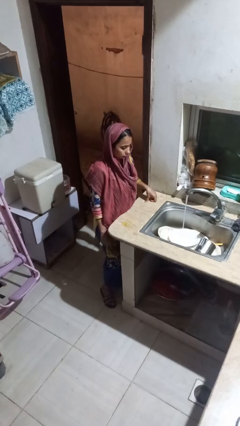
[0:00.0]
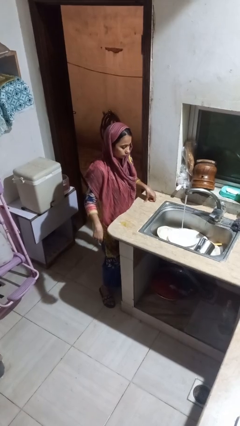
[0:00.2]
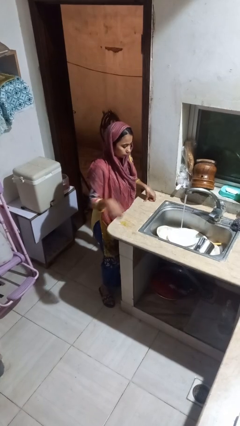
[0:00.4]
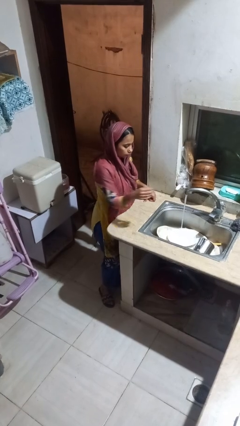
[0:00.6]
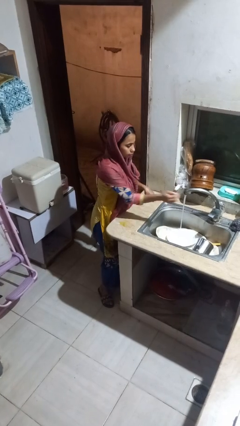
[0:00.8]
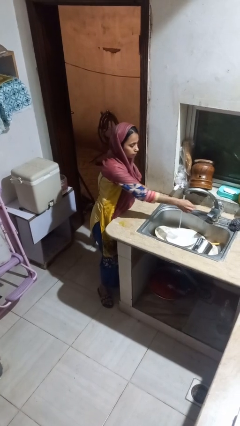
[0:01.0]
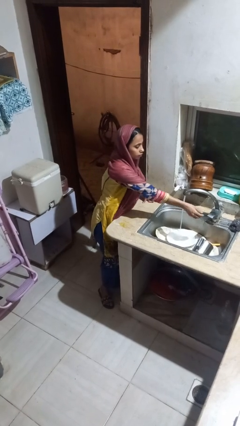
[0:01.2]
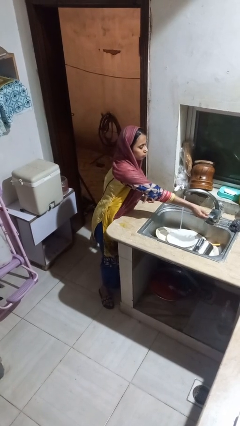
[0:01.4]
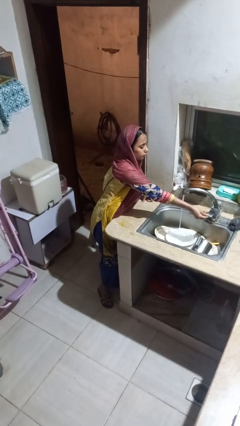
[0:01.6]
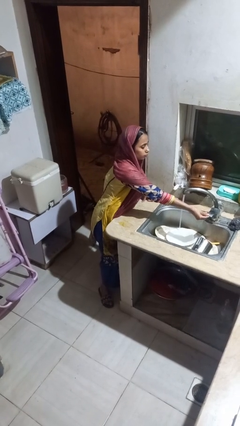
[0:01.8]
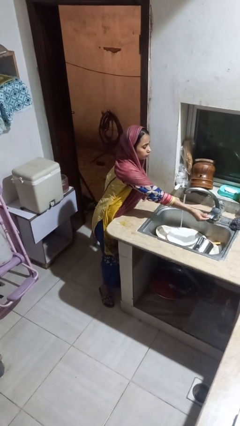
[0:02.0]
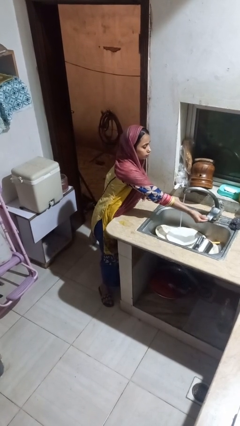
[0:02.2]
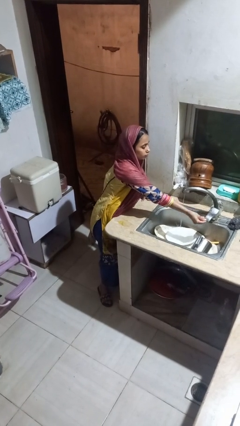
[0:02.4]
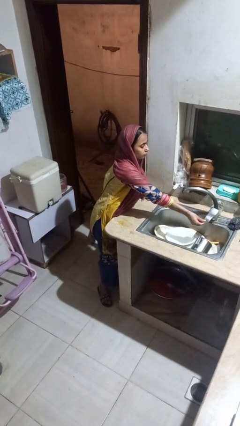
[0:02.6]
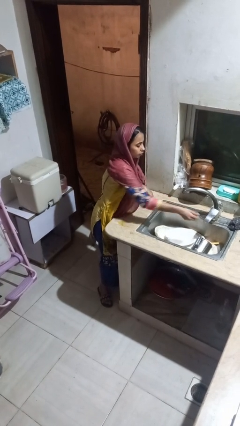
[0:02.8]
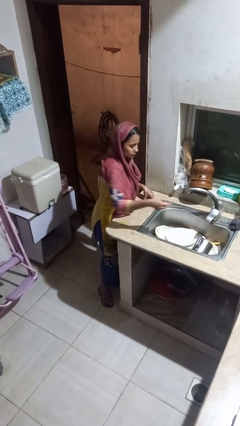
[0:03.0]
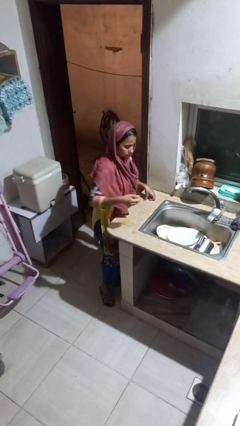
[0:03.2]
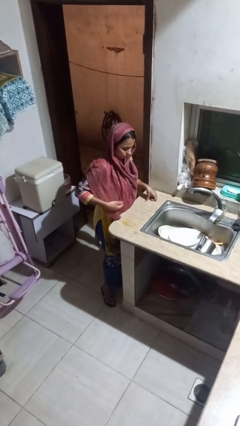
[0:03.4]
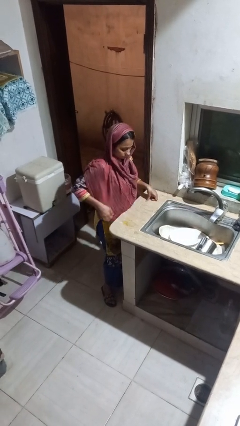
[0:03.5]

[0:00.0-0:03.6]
person turns off faucet

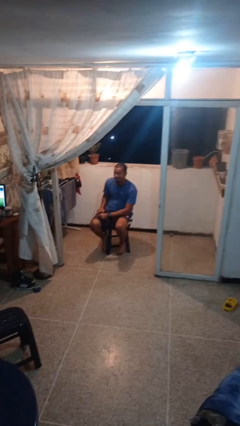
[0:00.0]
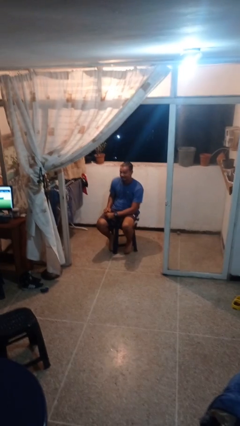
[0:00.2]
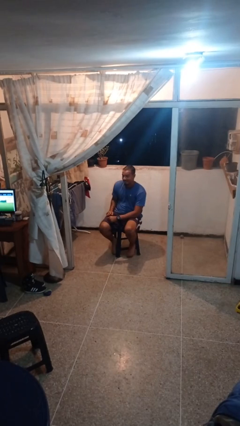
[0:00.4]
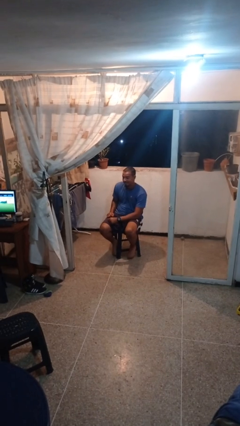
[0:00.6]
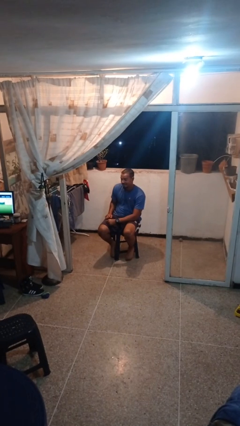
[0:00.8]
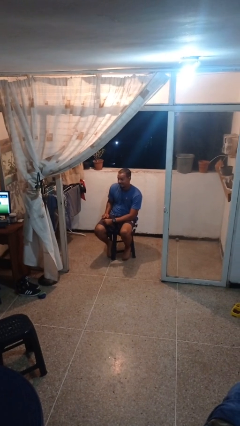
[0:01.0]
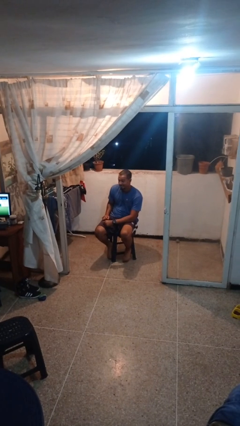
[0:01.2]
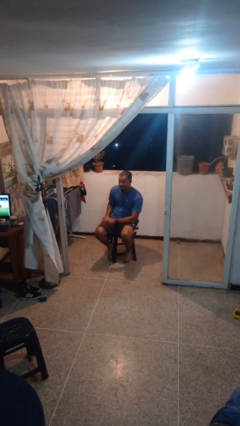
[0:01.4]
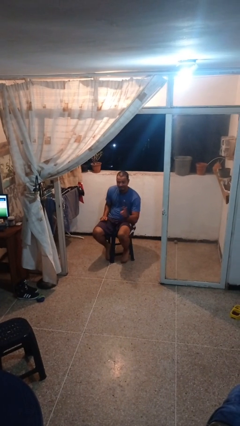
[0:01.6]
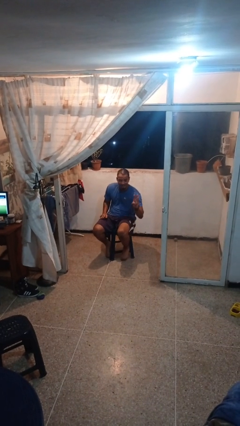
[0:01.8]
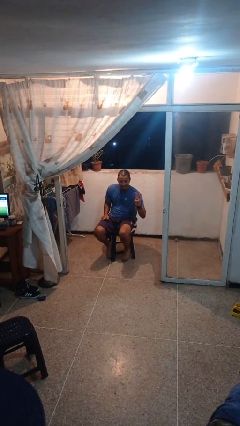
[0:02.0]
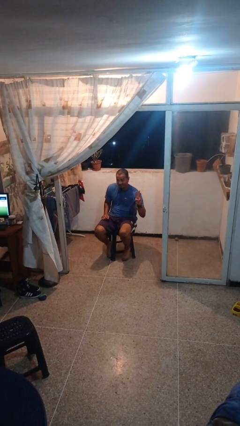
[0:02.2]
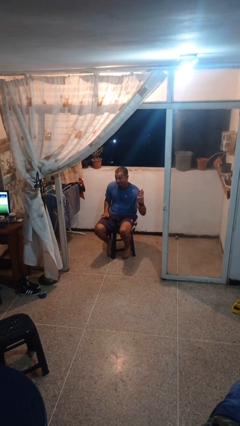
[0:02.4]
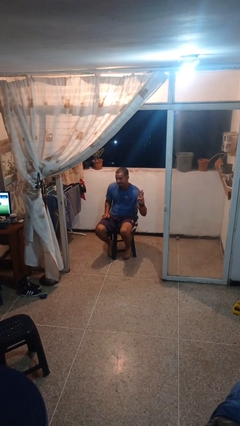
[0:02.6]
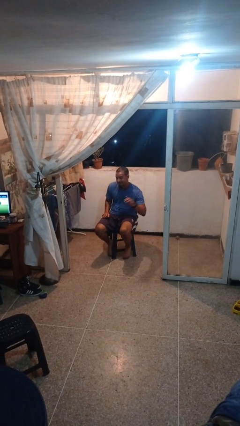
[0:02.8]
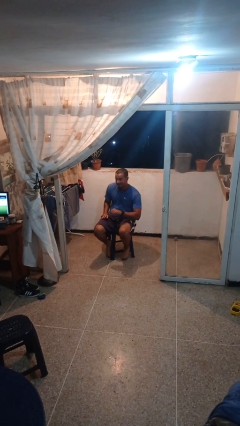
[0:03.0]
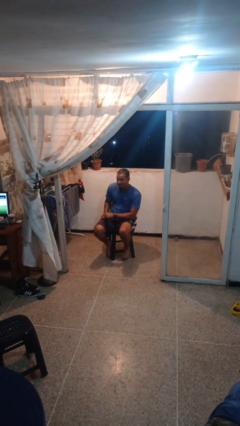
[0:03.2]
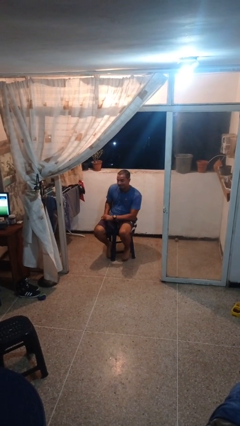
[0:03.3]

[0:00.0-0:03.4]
person gestures number three

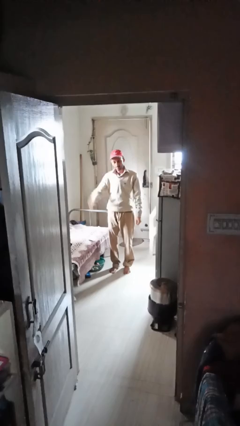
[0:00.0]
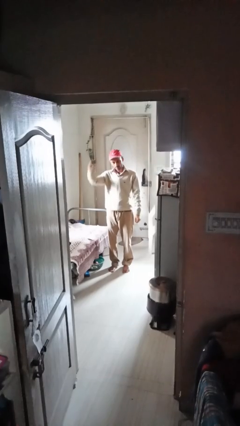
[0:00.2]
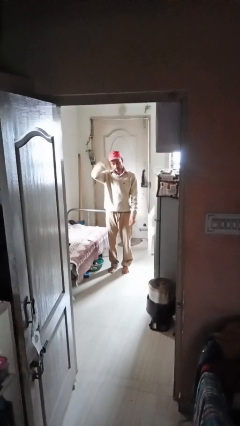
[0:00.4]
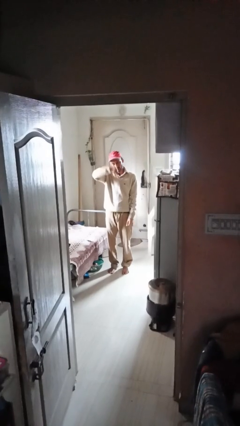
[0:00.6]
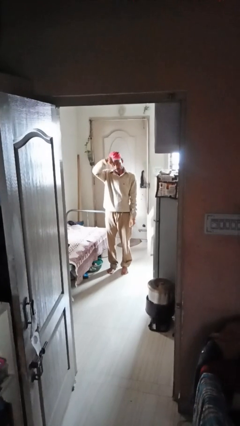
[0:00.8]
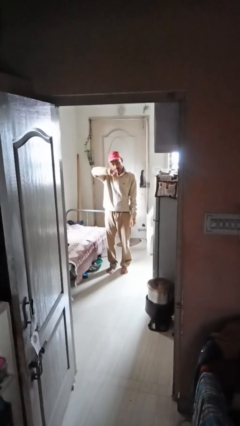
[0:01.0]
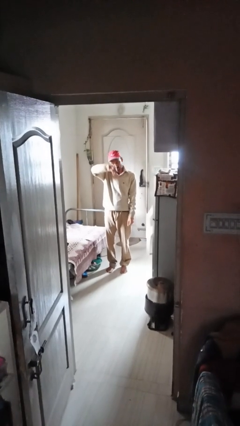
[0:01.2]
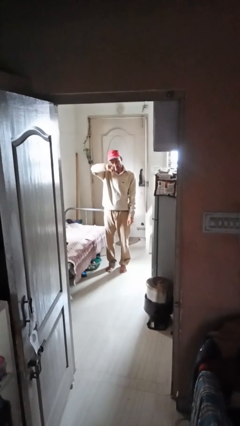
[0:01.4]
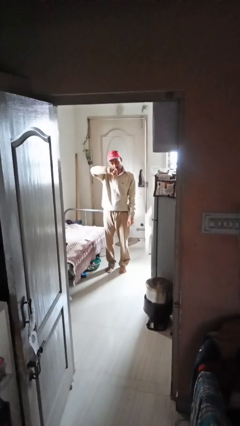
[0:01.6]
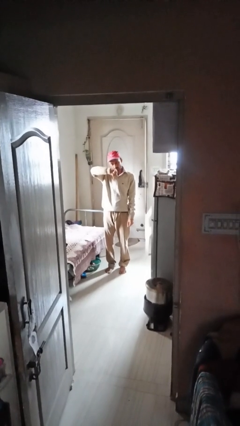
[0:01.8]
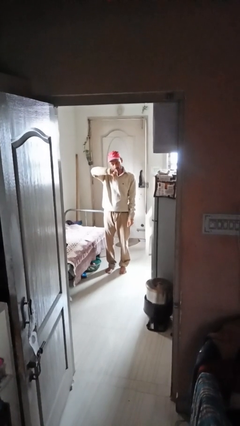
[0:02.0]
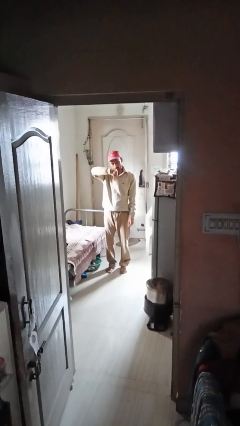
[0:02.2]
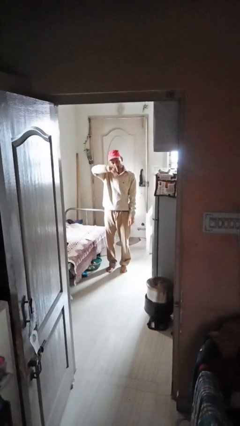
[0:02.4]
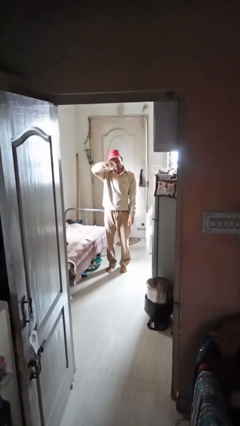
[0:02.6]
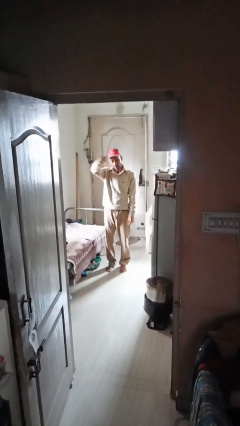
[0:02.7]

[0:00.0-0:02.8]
person gestures thumbs down

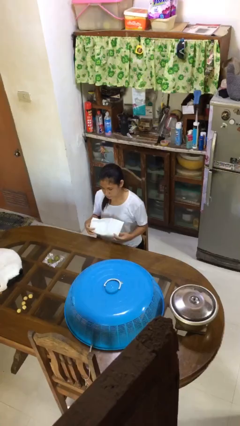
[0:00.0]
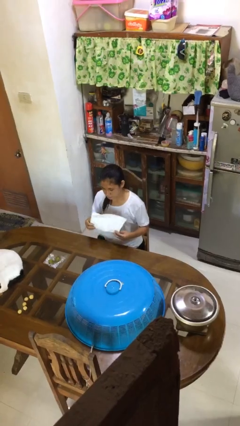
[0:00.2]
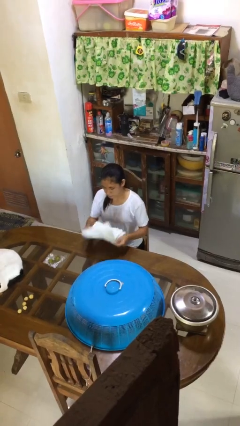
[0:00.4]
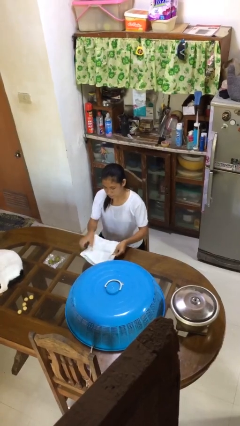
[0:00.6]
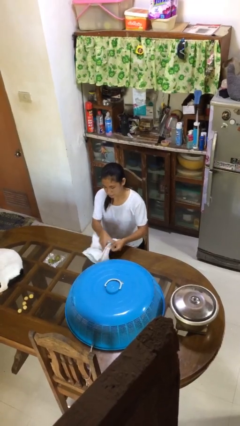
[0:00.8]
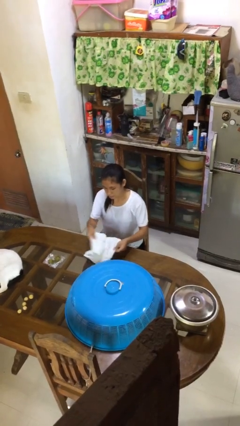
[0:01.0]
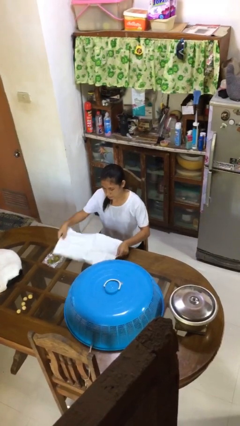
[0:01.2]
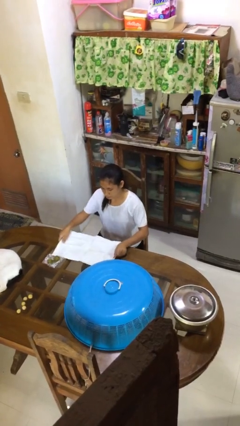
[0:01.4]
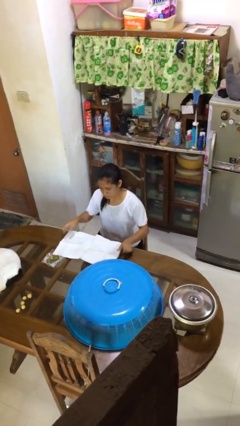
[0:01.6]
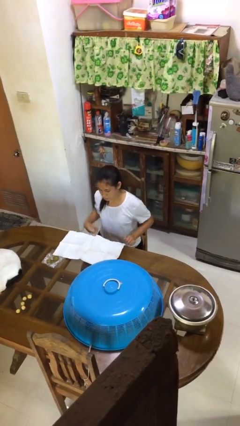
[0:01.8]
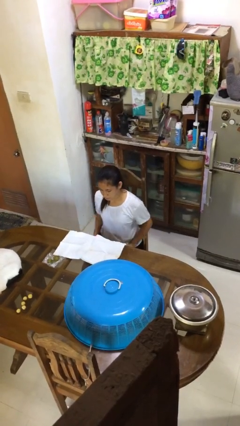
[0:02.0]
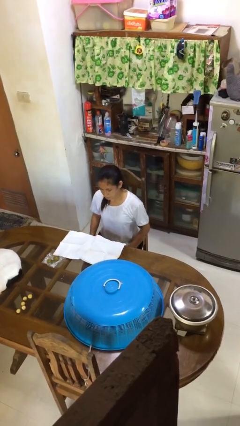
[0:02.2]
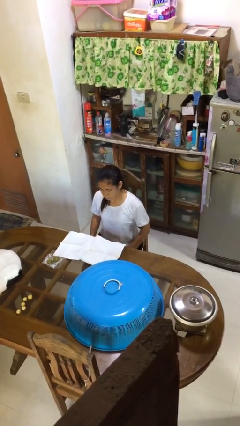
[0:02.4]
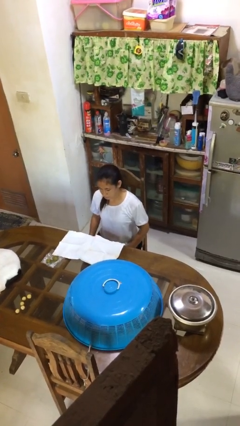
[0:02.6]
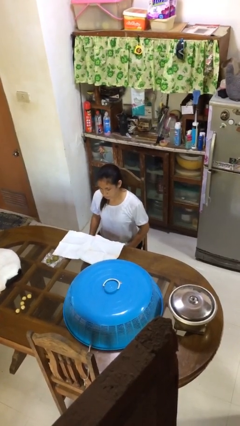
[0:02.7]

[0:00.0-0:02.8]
person spreads tablecloth

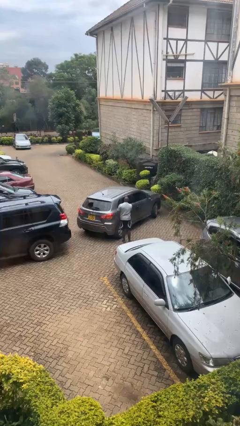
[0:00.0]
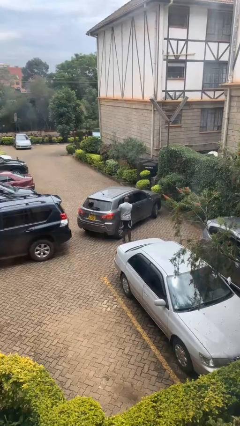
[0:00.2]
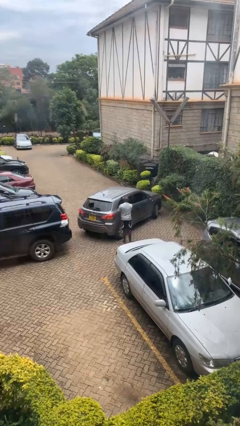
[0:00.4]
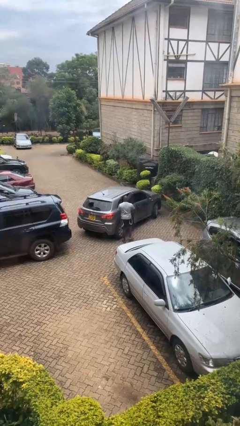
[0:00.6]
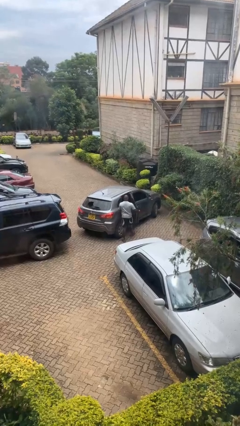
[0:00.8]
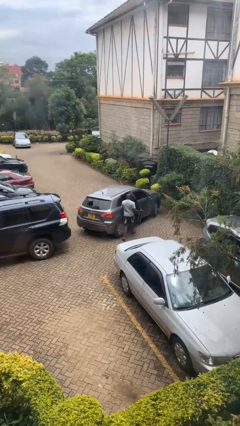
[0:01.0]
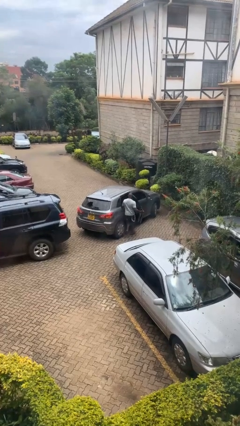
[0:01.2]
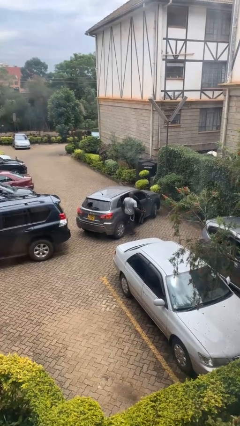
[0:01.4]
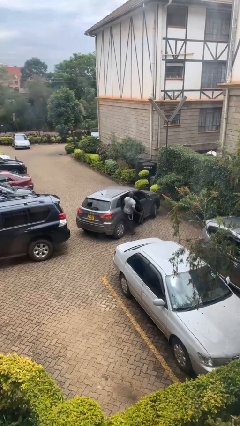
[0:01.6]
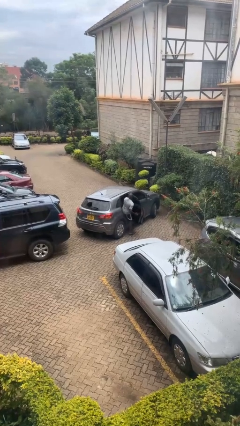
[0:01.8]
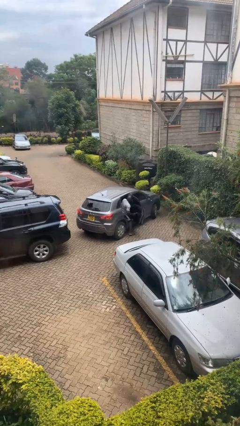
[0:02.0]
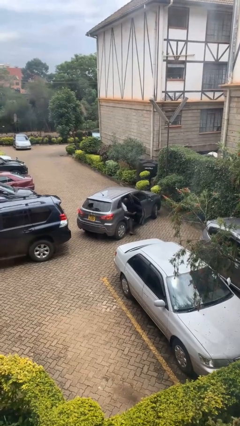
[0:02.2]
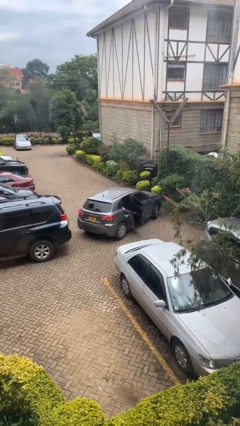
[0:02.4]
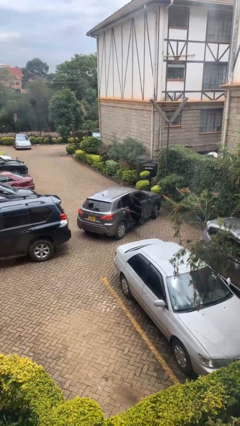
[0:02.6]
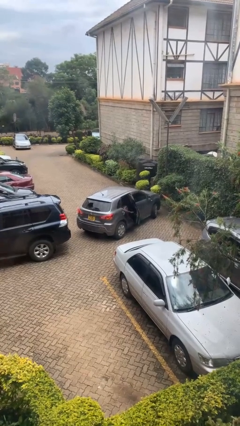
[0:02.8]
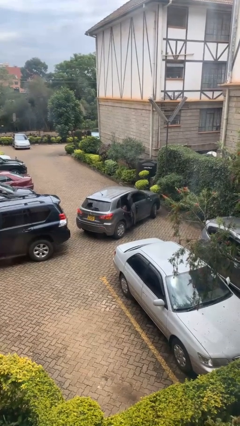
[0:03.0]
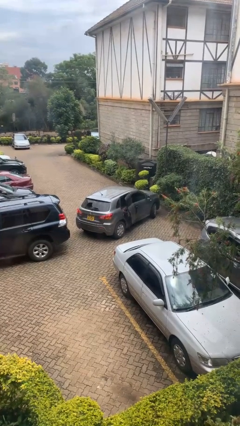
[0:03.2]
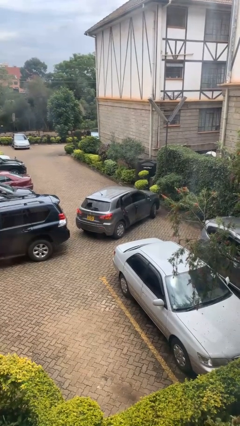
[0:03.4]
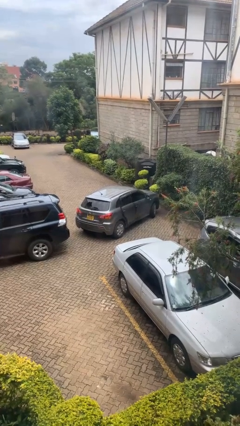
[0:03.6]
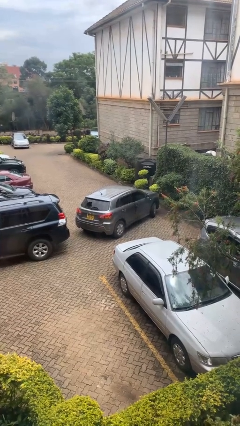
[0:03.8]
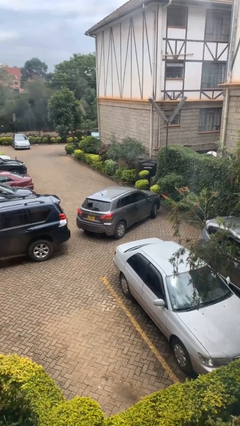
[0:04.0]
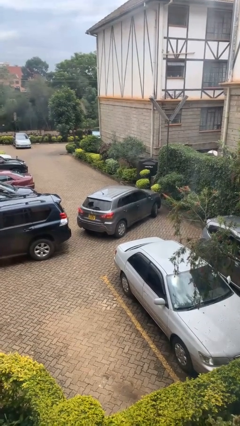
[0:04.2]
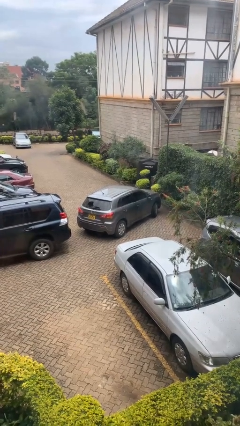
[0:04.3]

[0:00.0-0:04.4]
car picks up person

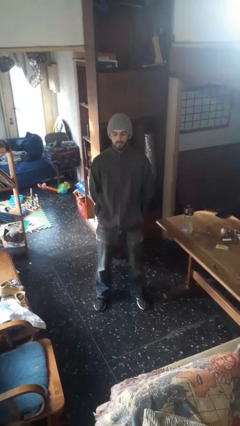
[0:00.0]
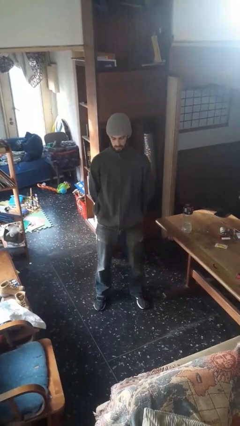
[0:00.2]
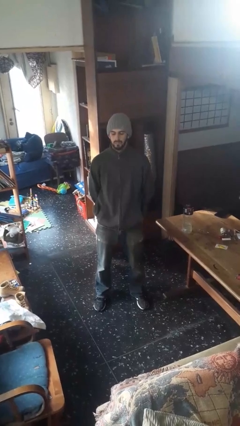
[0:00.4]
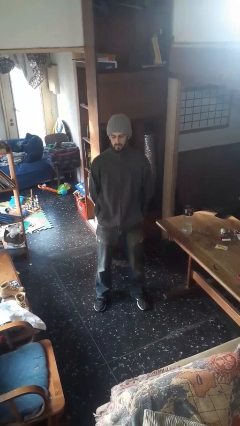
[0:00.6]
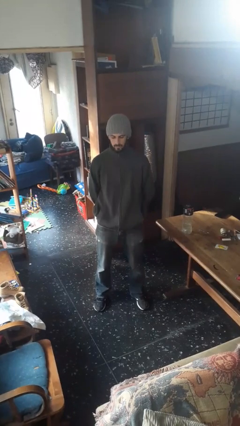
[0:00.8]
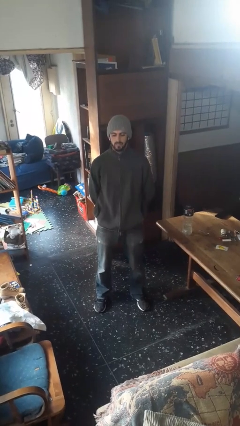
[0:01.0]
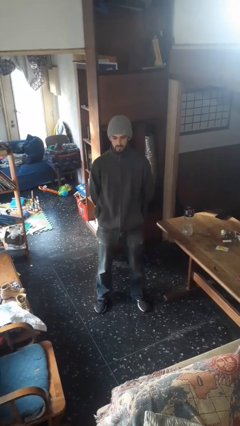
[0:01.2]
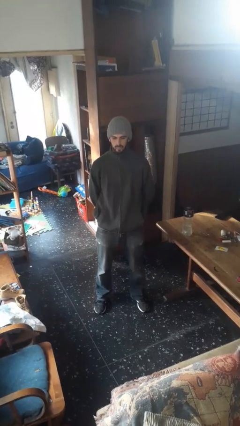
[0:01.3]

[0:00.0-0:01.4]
person nods head
